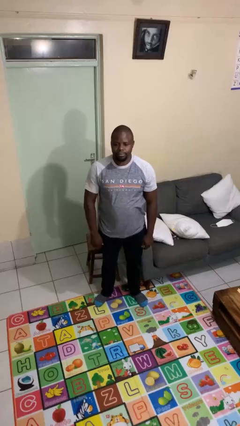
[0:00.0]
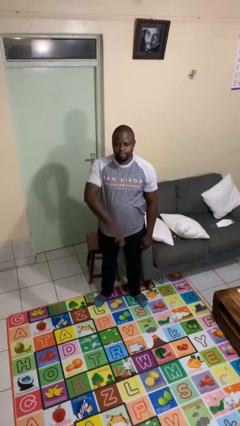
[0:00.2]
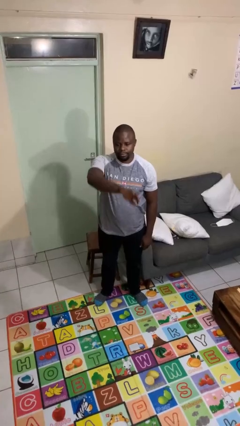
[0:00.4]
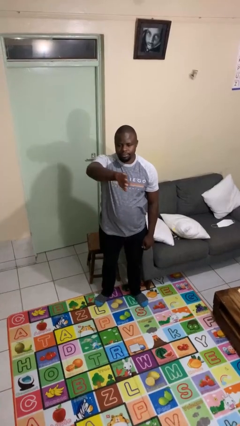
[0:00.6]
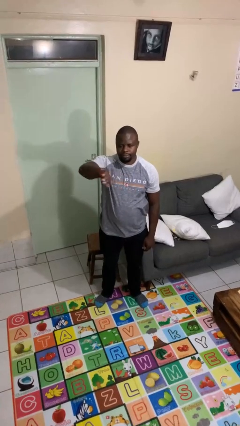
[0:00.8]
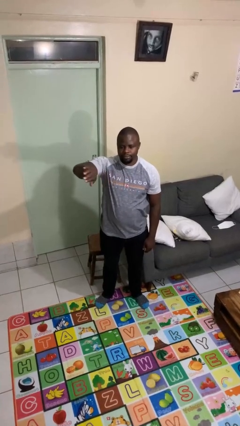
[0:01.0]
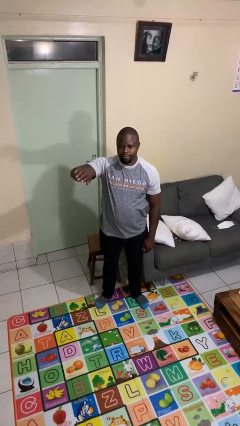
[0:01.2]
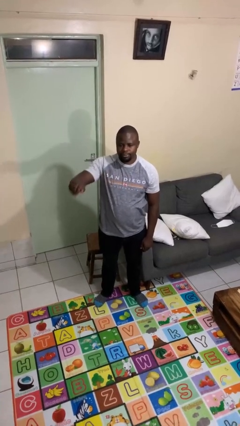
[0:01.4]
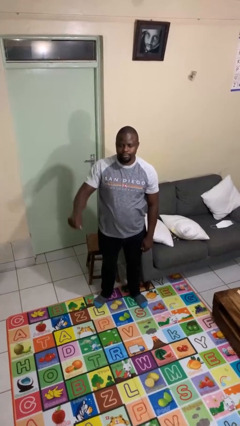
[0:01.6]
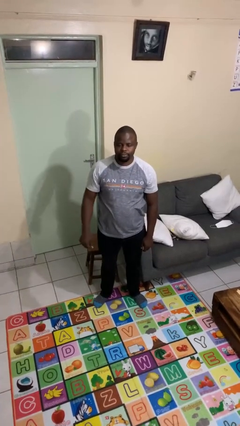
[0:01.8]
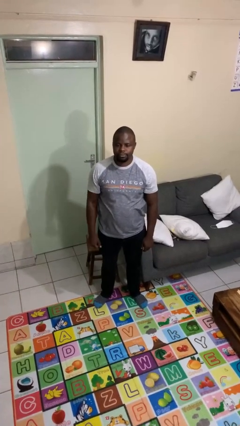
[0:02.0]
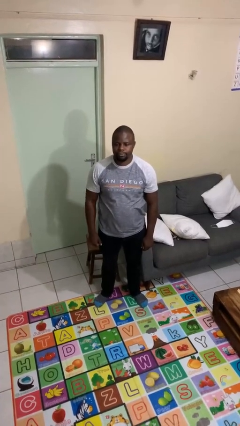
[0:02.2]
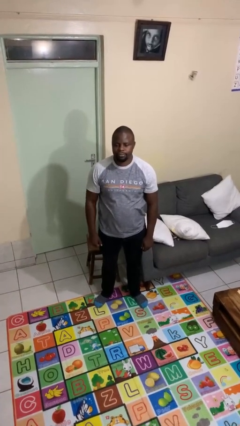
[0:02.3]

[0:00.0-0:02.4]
person gestures swipe right

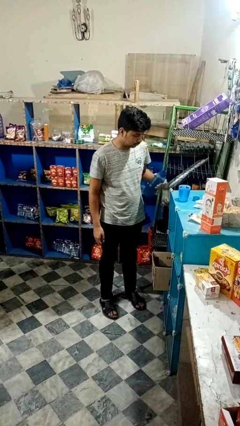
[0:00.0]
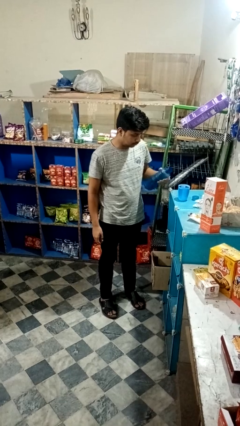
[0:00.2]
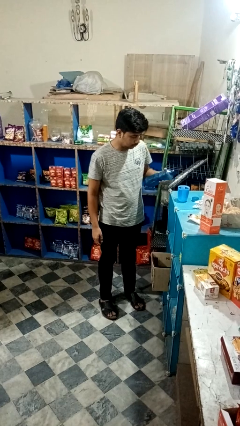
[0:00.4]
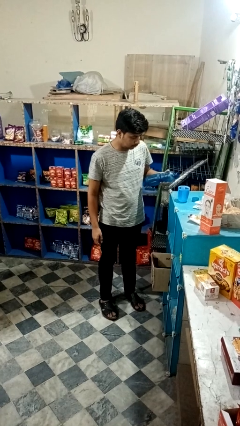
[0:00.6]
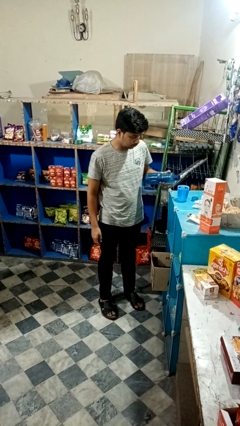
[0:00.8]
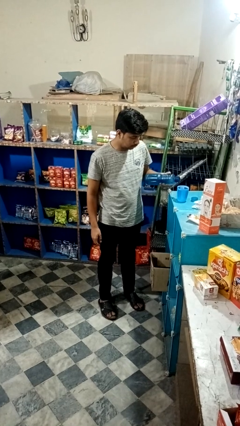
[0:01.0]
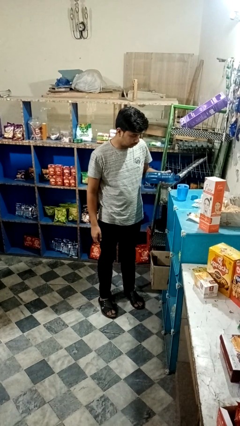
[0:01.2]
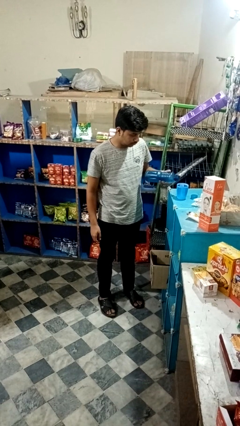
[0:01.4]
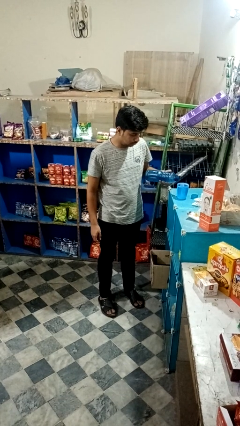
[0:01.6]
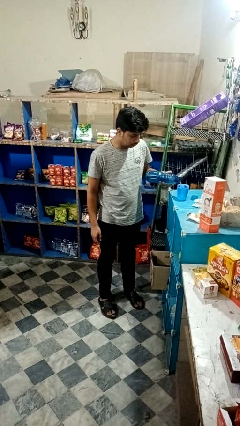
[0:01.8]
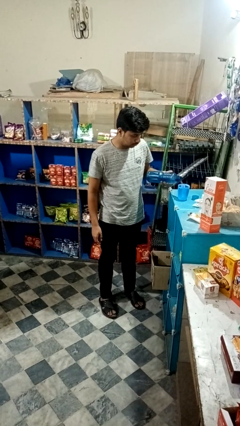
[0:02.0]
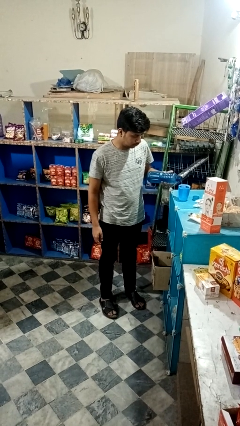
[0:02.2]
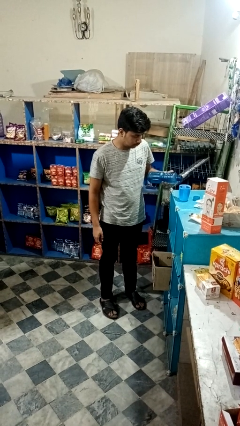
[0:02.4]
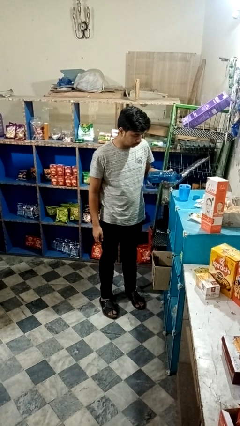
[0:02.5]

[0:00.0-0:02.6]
person pours liquid into cup

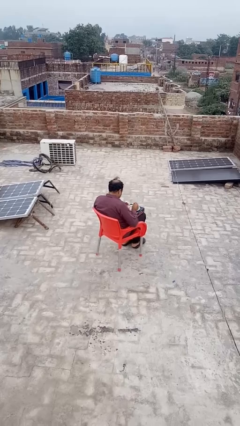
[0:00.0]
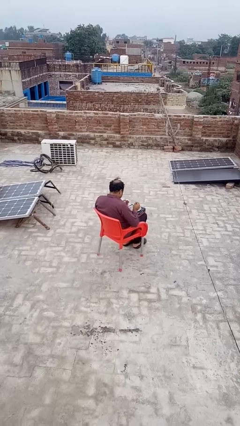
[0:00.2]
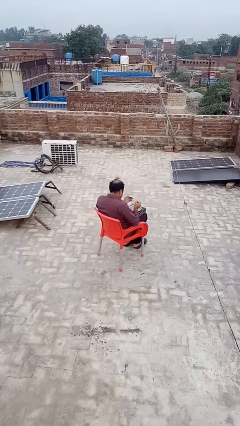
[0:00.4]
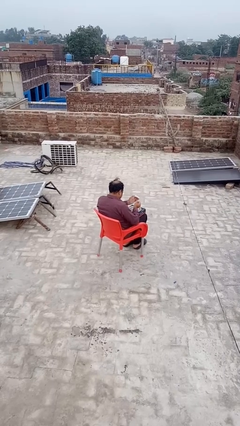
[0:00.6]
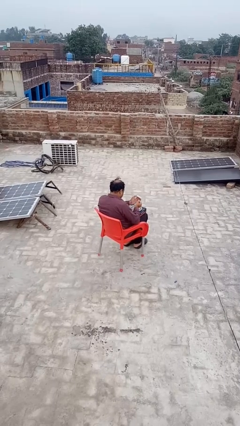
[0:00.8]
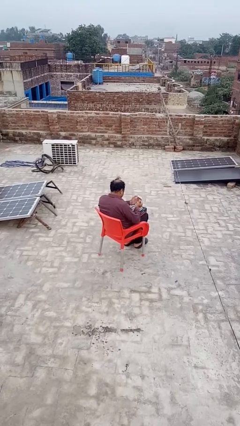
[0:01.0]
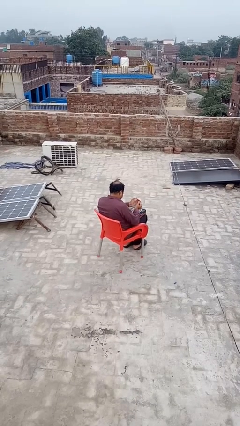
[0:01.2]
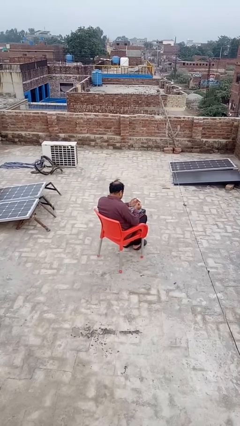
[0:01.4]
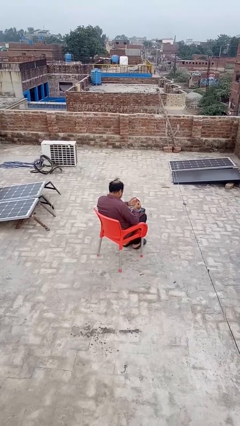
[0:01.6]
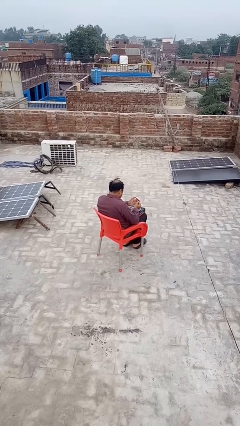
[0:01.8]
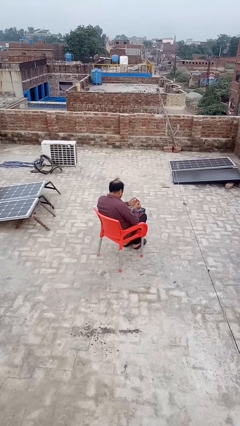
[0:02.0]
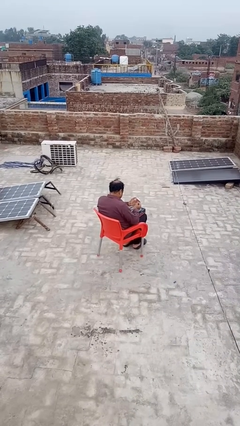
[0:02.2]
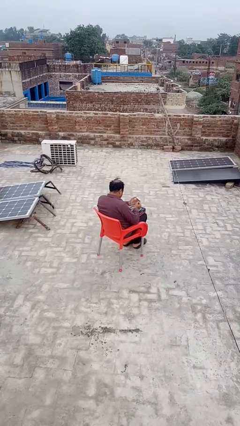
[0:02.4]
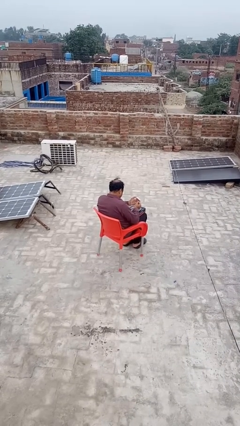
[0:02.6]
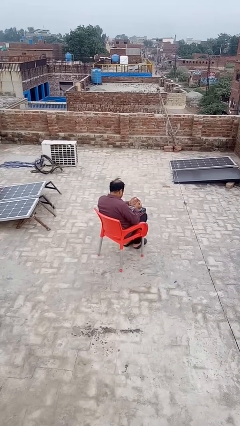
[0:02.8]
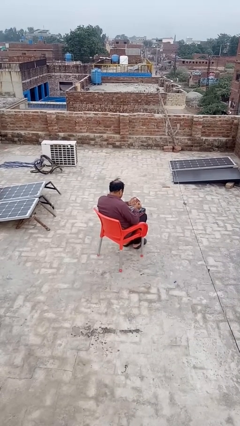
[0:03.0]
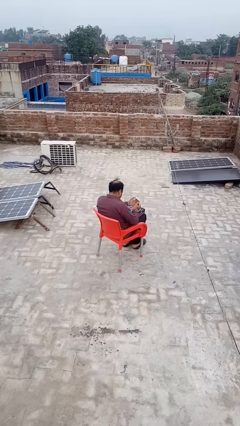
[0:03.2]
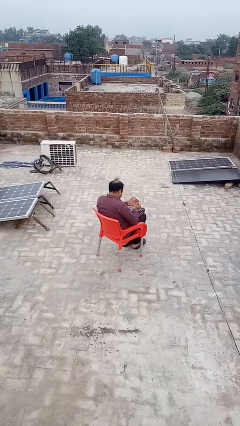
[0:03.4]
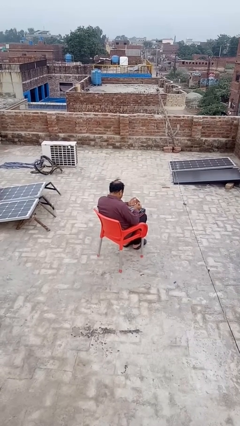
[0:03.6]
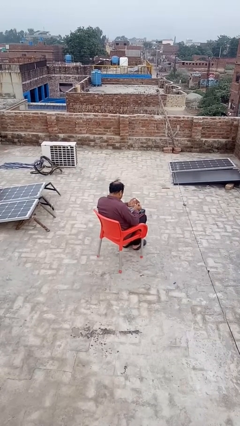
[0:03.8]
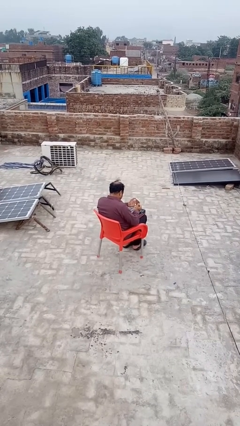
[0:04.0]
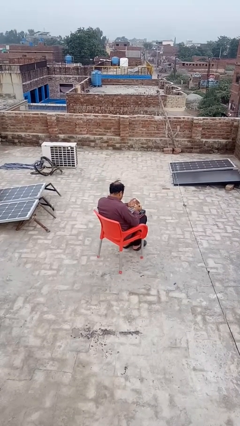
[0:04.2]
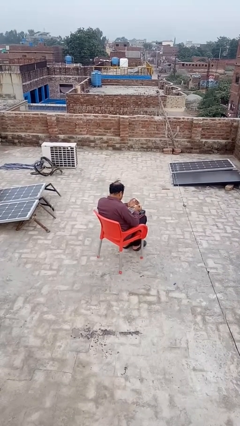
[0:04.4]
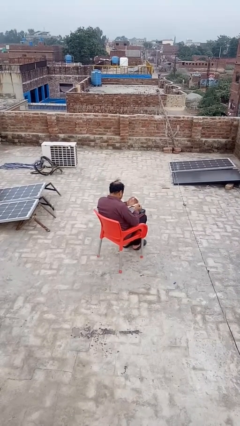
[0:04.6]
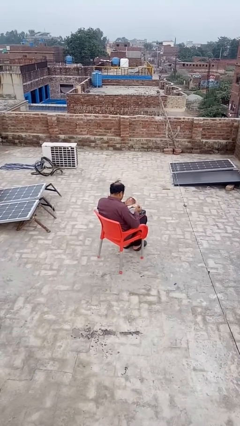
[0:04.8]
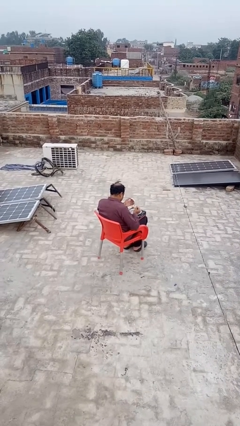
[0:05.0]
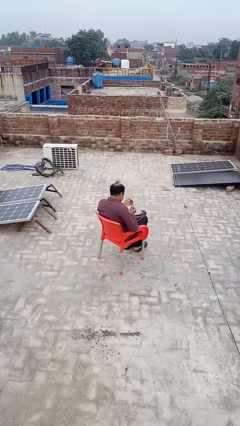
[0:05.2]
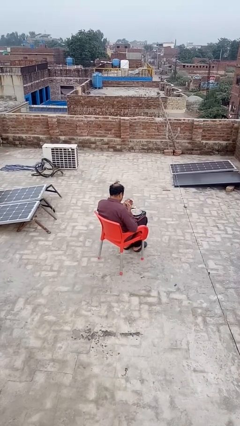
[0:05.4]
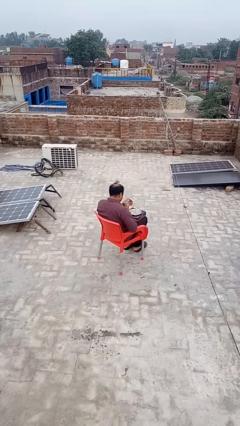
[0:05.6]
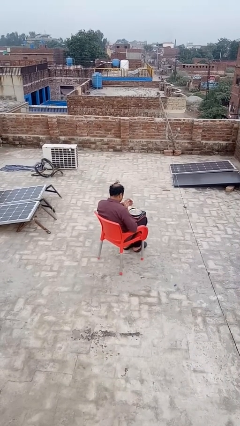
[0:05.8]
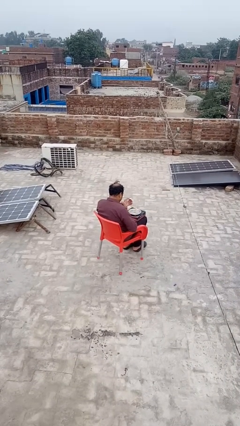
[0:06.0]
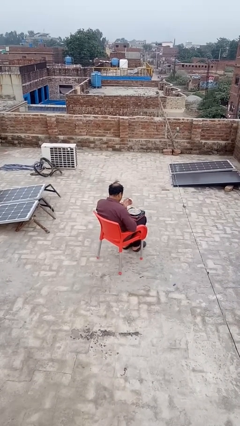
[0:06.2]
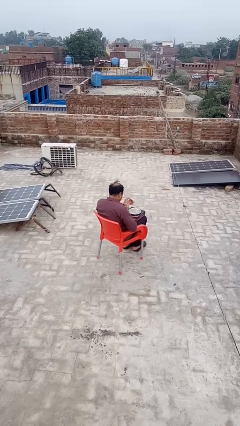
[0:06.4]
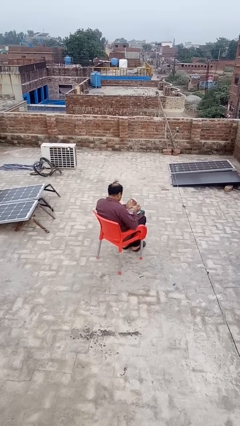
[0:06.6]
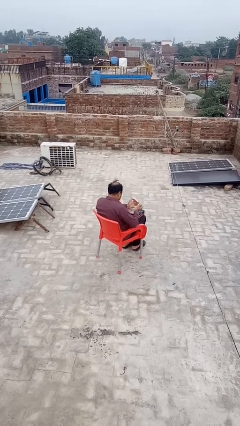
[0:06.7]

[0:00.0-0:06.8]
person lights candle

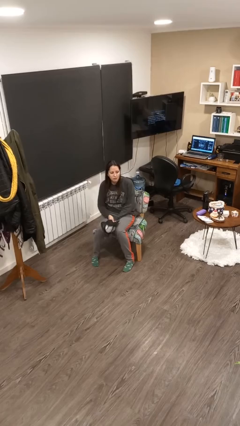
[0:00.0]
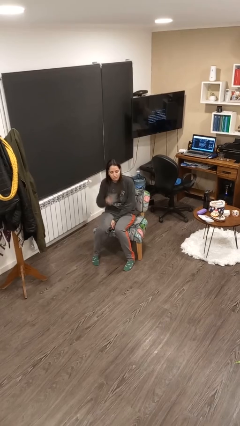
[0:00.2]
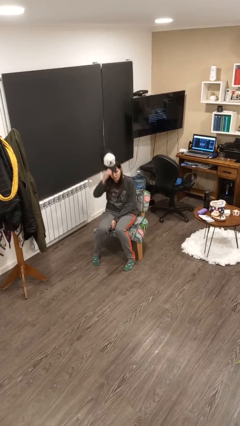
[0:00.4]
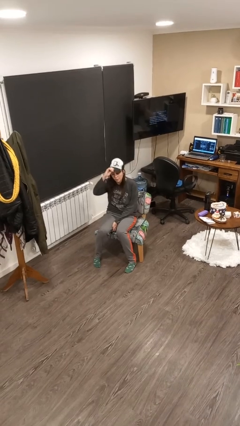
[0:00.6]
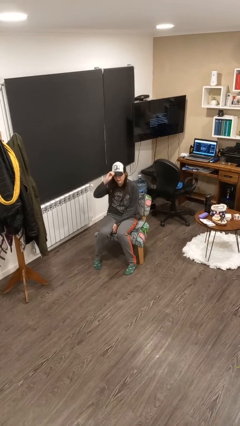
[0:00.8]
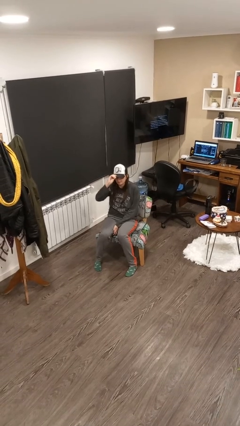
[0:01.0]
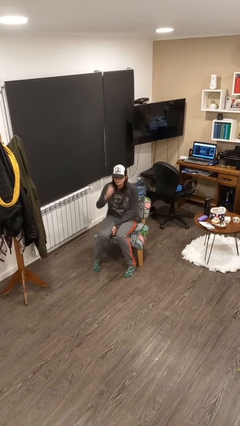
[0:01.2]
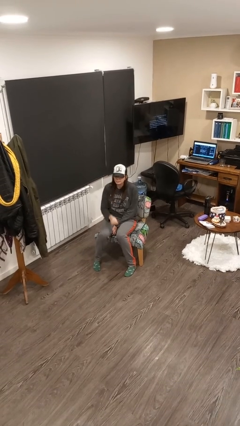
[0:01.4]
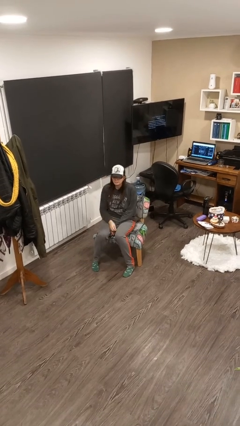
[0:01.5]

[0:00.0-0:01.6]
person puts on hat

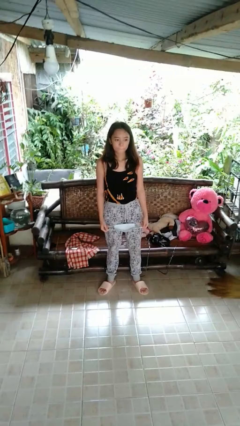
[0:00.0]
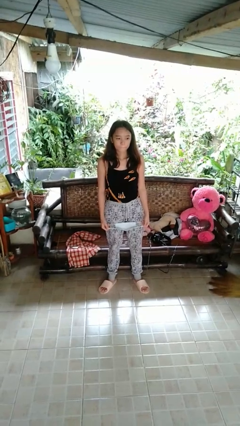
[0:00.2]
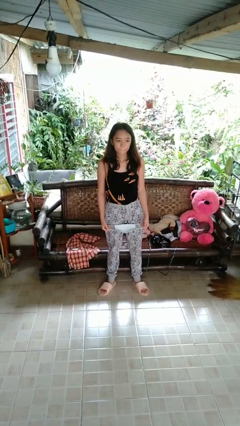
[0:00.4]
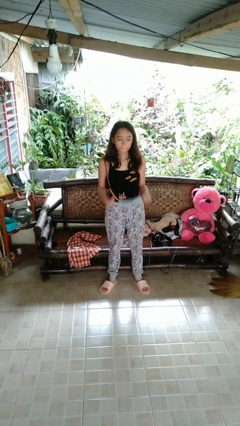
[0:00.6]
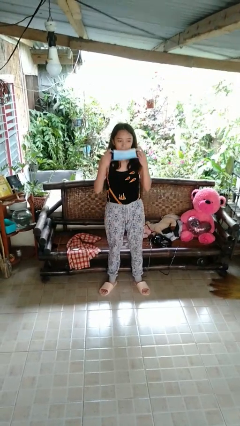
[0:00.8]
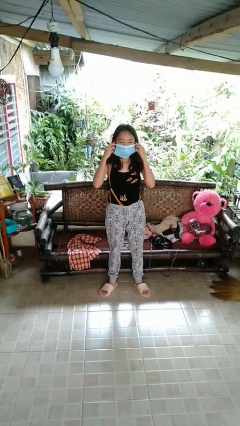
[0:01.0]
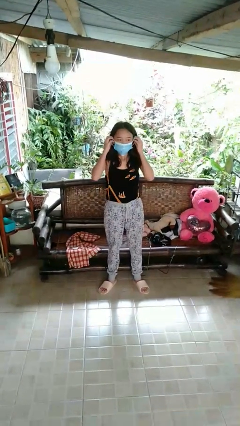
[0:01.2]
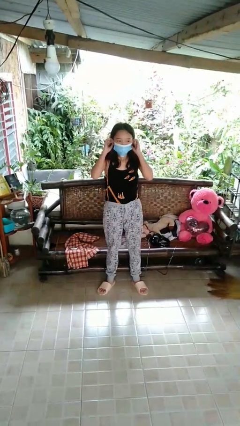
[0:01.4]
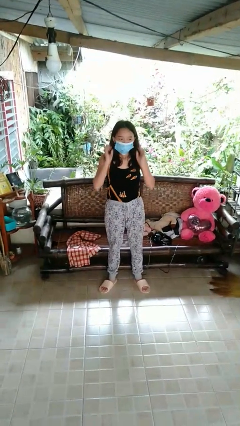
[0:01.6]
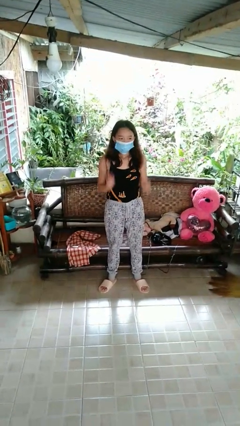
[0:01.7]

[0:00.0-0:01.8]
person puts on facemask

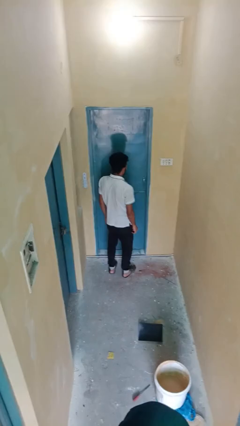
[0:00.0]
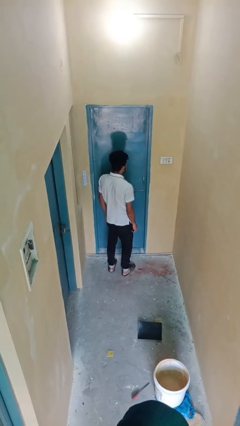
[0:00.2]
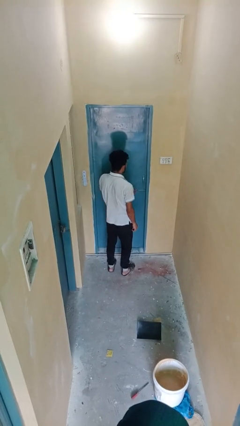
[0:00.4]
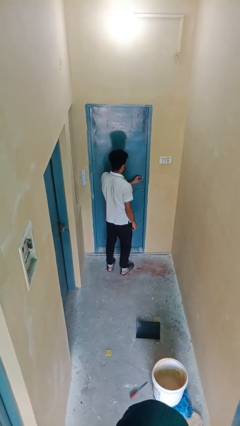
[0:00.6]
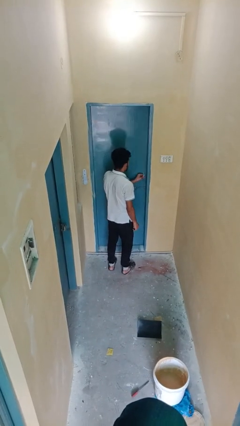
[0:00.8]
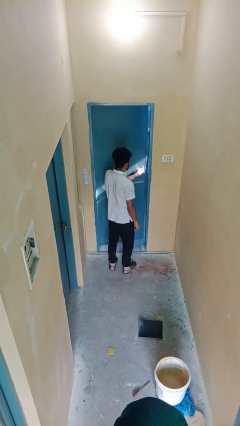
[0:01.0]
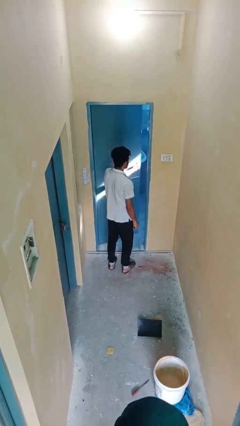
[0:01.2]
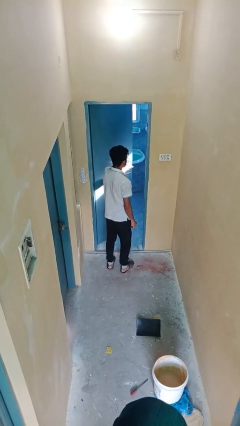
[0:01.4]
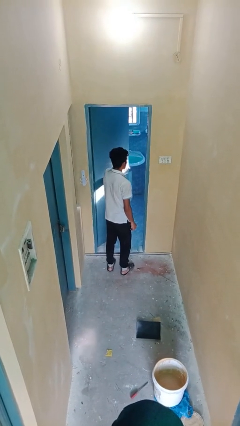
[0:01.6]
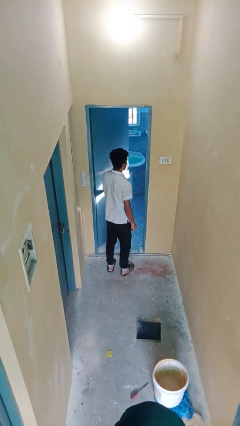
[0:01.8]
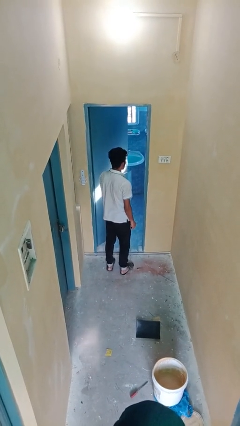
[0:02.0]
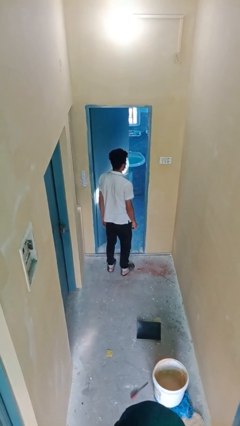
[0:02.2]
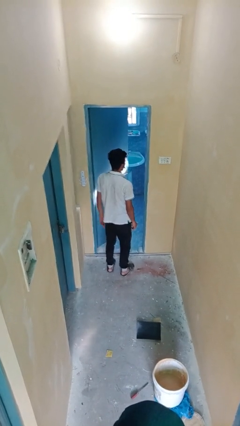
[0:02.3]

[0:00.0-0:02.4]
person opens facility door
